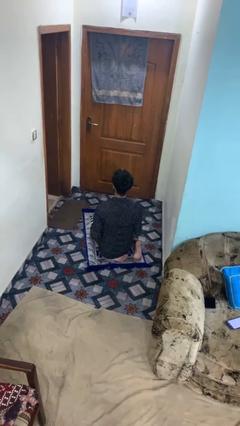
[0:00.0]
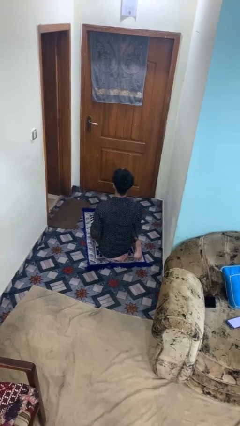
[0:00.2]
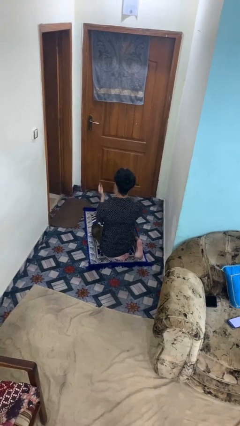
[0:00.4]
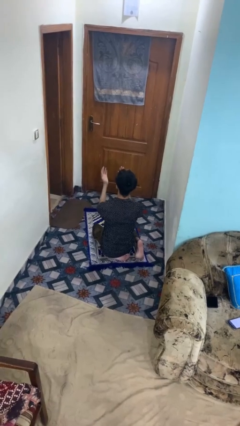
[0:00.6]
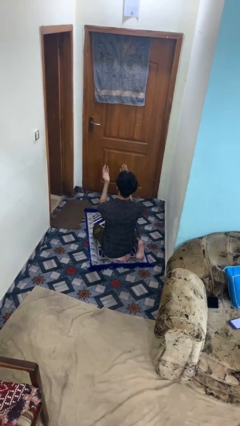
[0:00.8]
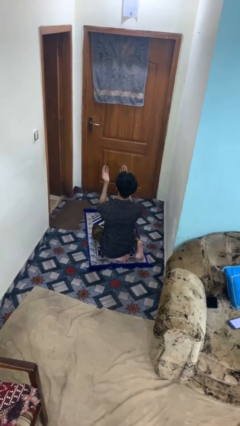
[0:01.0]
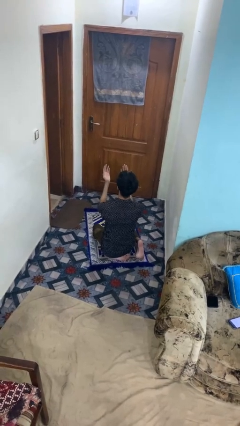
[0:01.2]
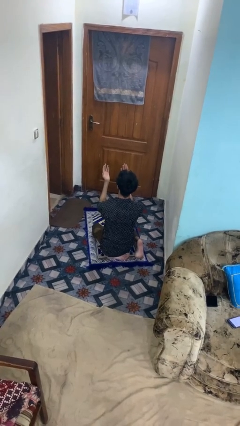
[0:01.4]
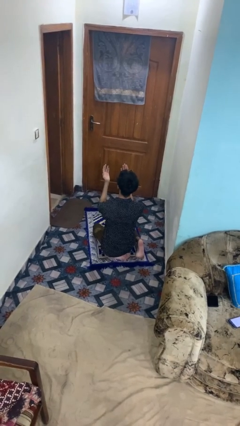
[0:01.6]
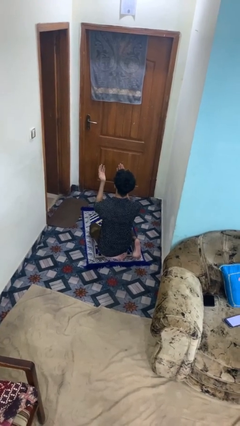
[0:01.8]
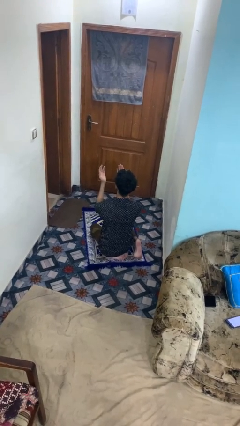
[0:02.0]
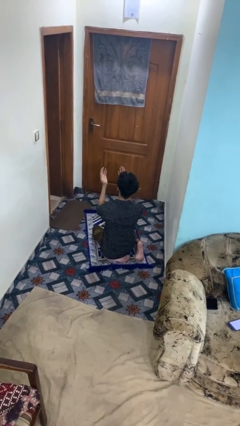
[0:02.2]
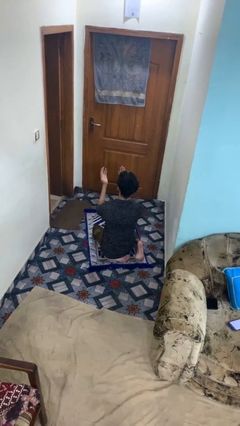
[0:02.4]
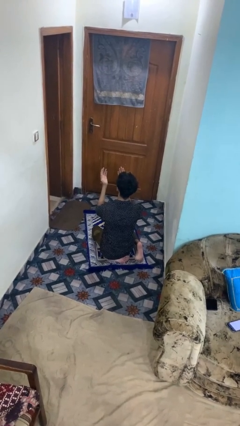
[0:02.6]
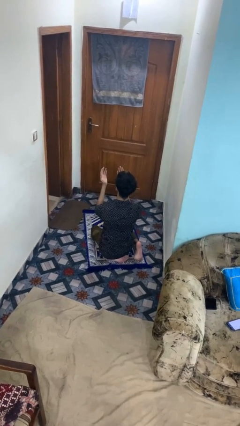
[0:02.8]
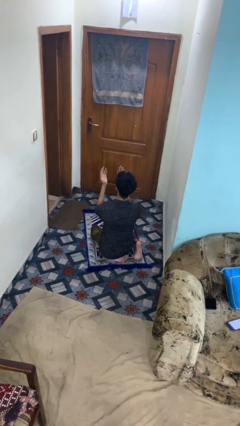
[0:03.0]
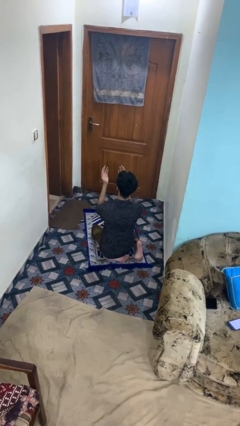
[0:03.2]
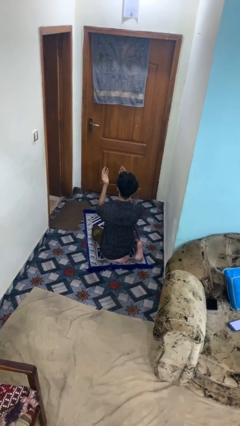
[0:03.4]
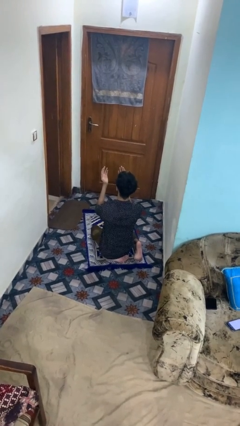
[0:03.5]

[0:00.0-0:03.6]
person prays

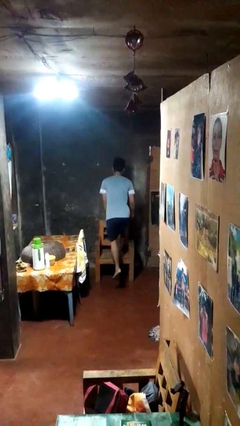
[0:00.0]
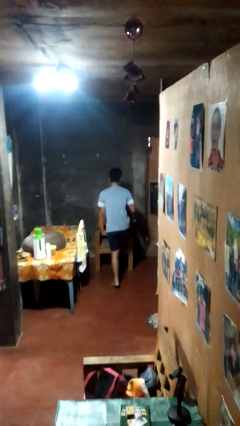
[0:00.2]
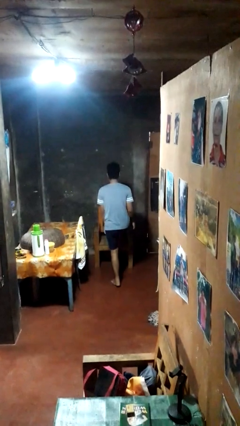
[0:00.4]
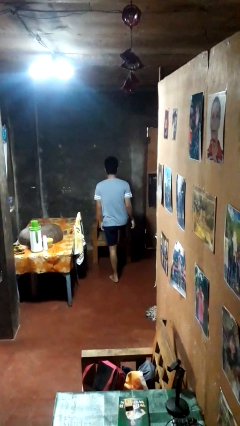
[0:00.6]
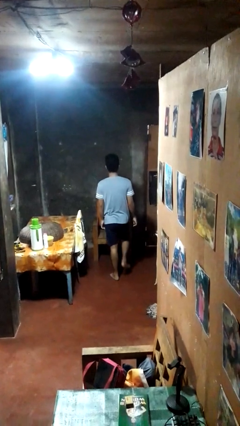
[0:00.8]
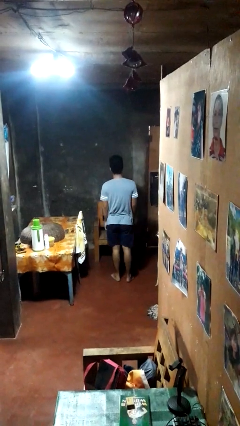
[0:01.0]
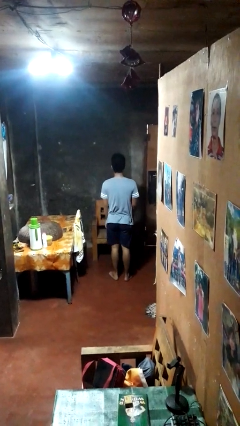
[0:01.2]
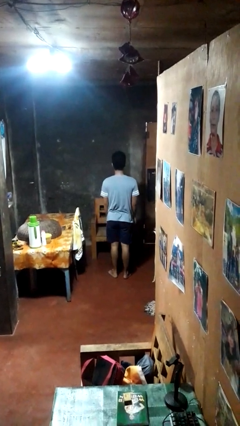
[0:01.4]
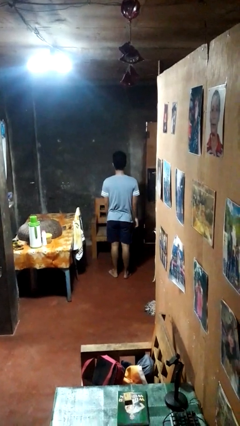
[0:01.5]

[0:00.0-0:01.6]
person climbs off chair

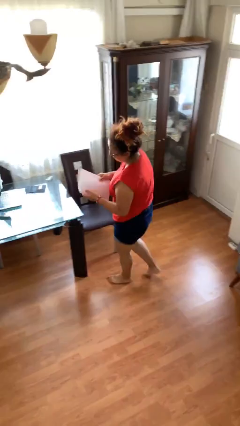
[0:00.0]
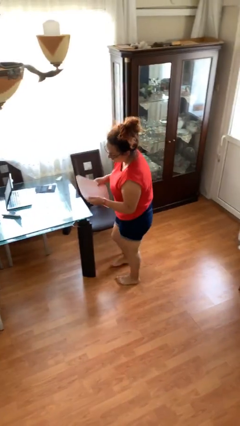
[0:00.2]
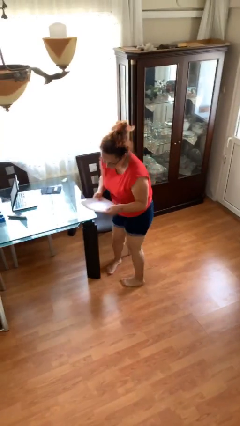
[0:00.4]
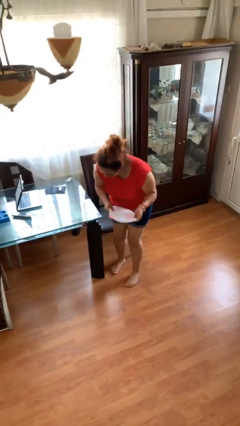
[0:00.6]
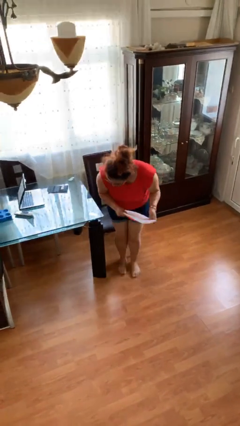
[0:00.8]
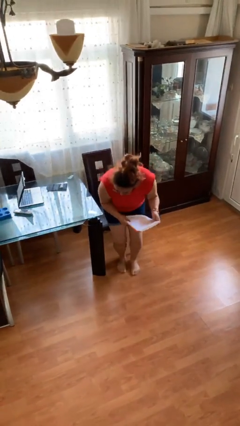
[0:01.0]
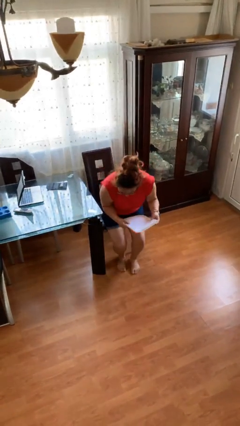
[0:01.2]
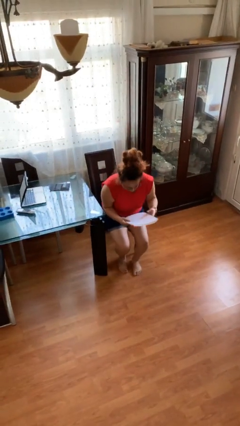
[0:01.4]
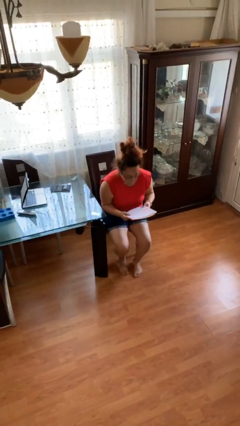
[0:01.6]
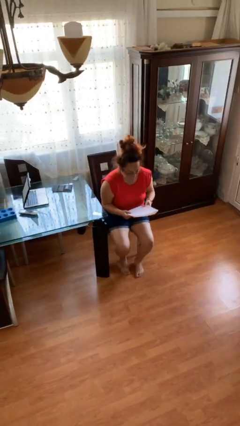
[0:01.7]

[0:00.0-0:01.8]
person sits down

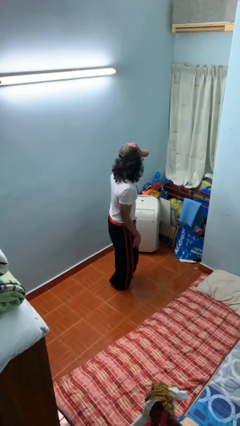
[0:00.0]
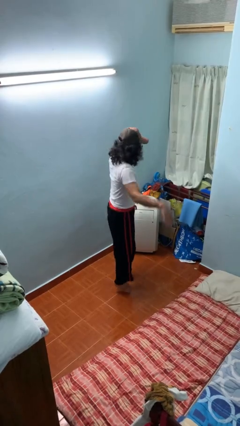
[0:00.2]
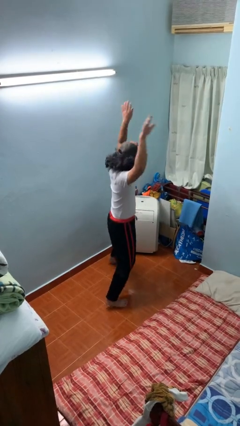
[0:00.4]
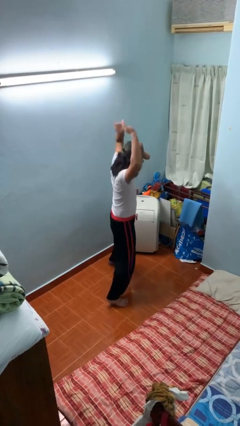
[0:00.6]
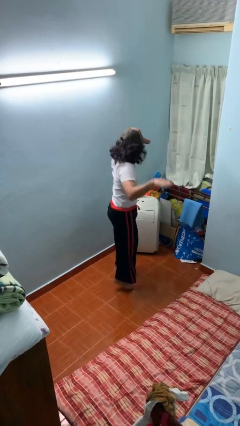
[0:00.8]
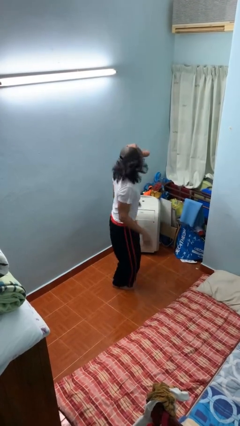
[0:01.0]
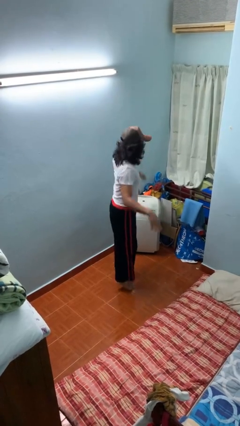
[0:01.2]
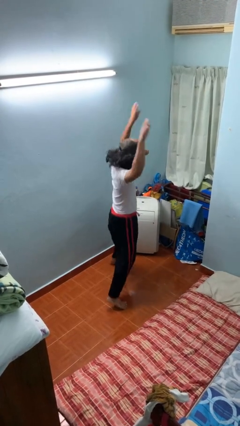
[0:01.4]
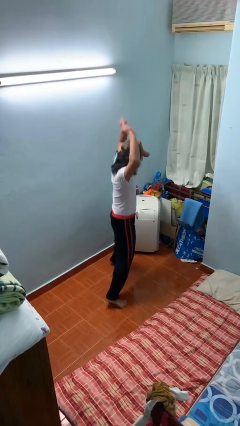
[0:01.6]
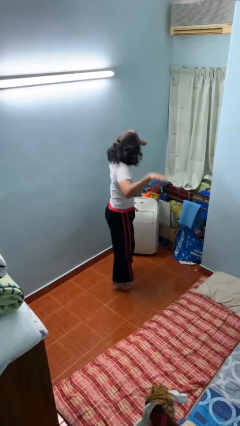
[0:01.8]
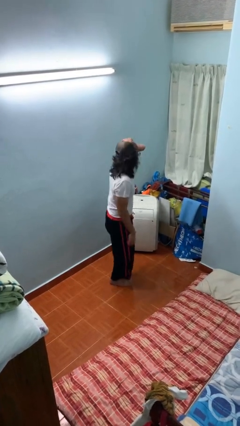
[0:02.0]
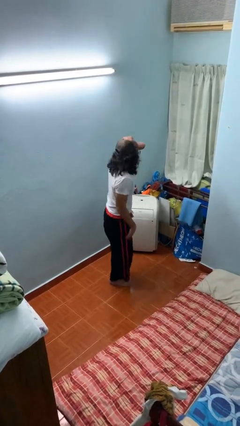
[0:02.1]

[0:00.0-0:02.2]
person exercises with jumping jacks

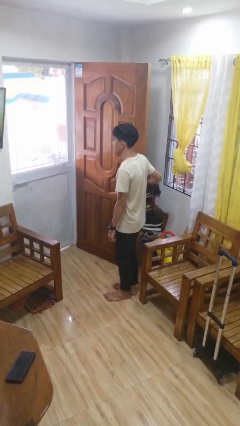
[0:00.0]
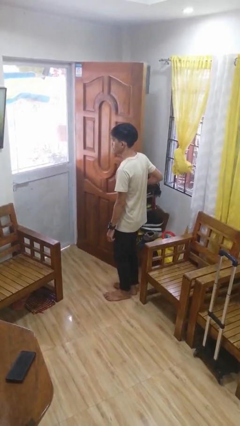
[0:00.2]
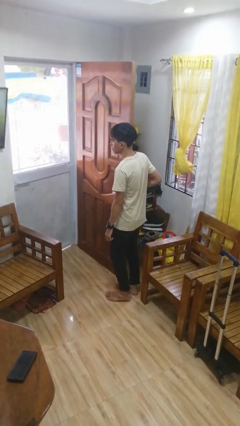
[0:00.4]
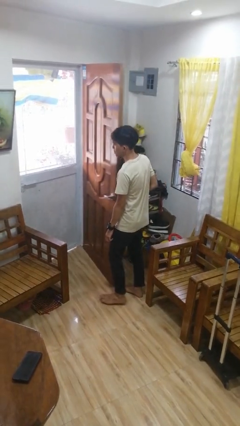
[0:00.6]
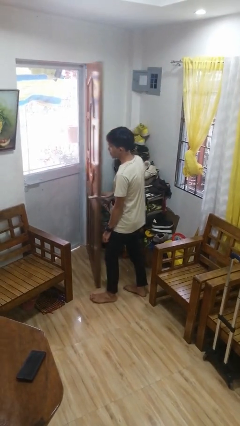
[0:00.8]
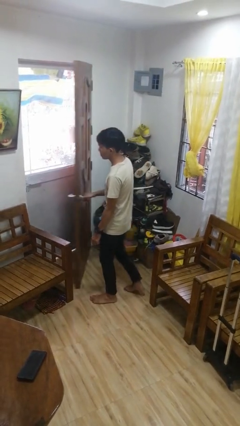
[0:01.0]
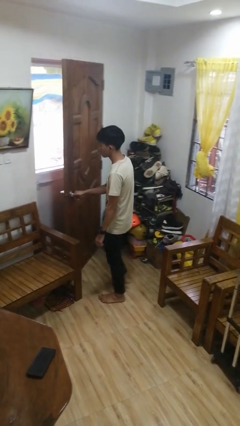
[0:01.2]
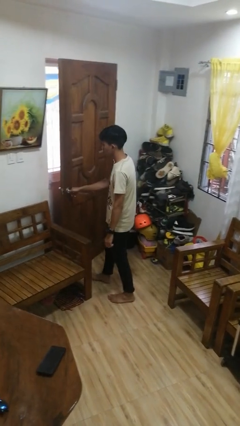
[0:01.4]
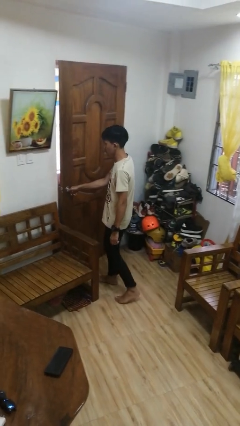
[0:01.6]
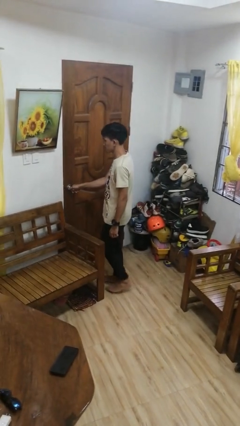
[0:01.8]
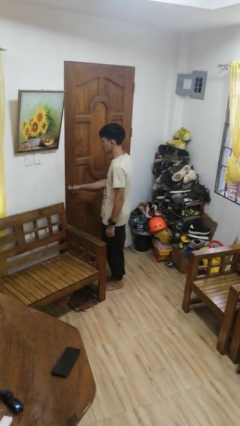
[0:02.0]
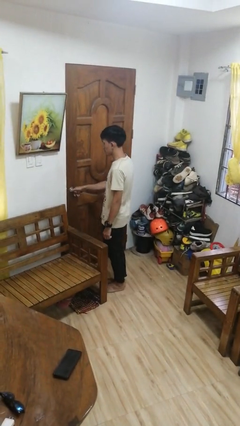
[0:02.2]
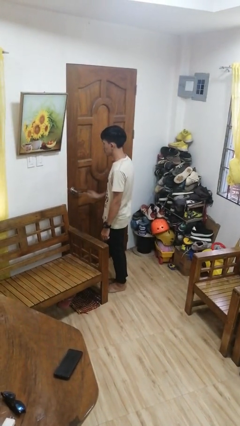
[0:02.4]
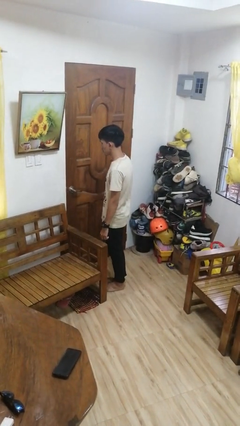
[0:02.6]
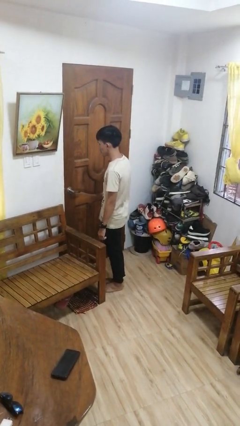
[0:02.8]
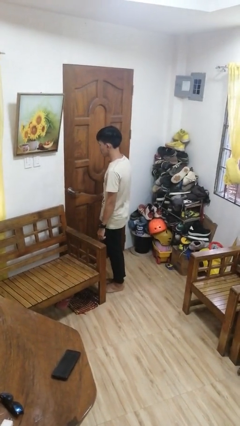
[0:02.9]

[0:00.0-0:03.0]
person closes facility door

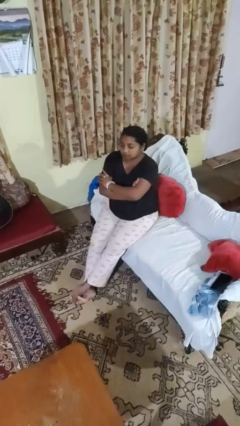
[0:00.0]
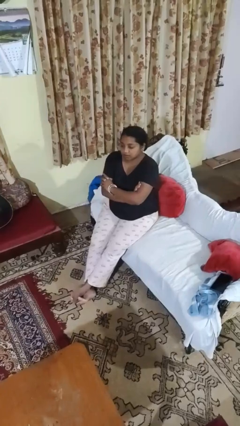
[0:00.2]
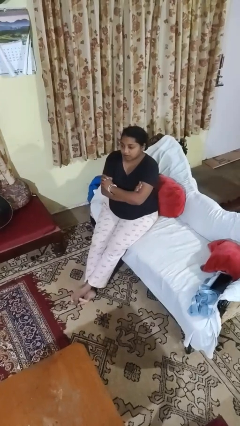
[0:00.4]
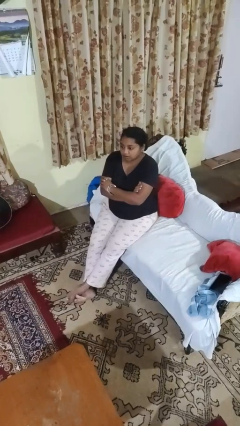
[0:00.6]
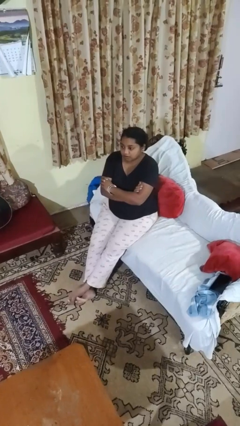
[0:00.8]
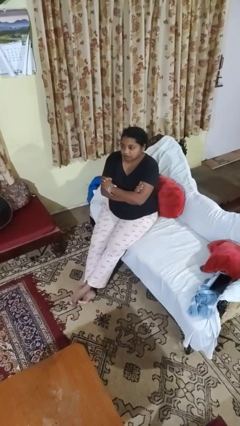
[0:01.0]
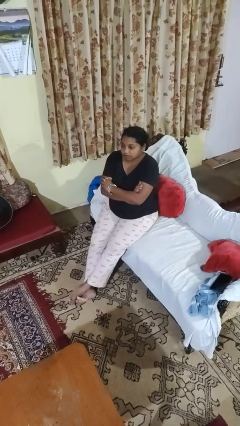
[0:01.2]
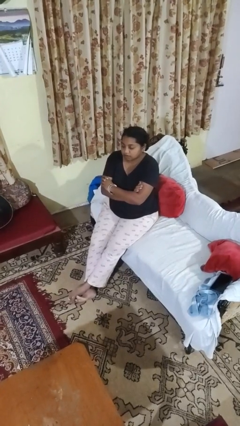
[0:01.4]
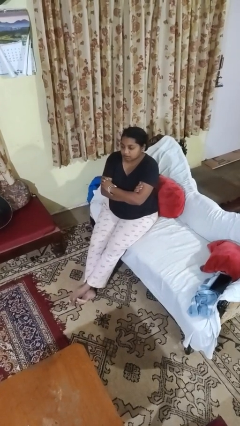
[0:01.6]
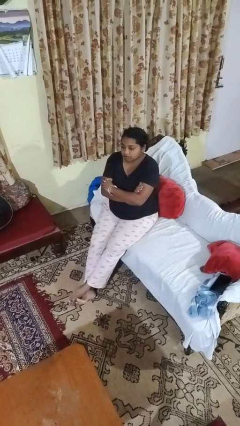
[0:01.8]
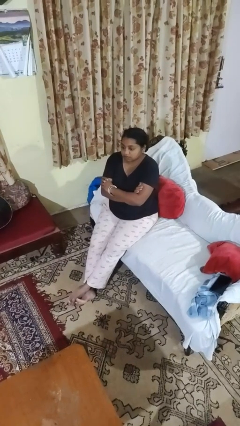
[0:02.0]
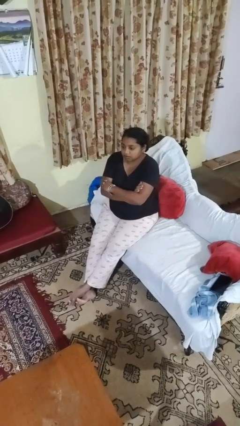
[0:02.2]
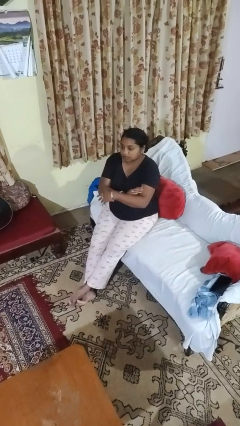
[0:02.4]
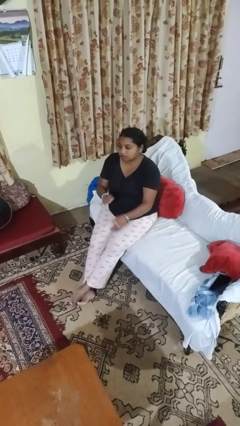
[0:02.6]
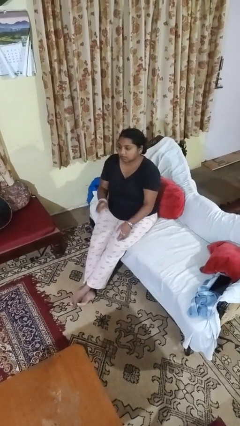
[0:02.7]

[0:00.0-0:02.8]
person crosses arms

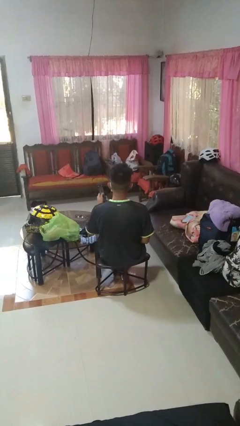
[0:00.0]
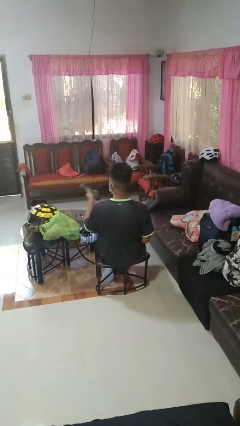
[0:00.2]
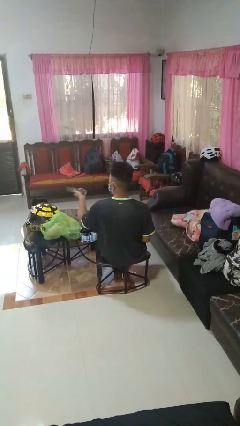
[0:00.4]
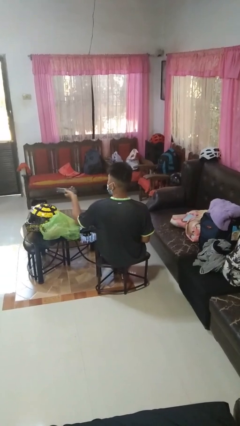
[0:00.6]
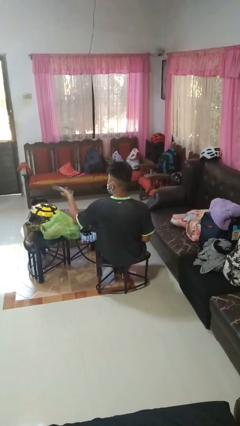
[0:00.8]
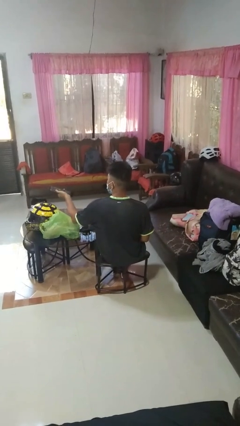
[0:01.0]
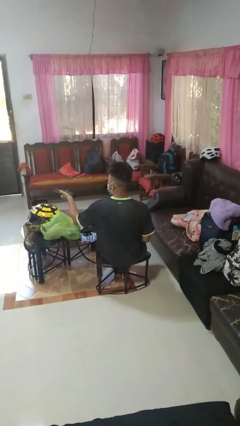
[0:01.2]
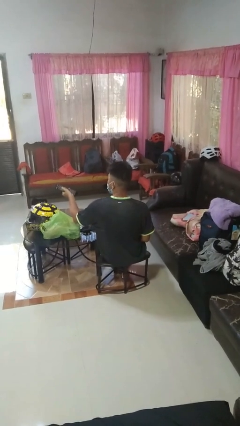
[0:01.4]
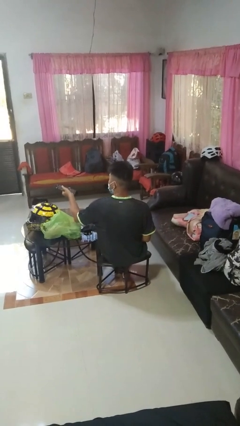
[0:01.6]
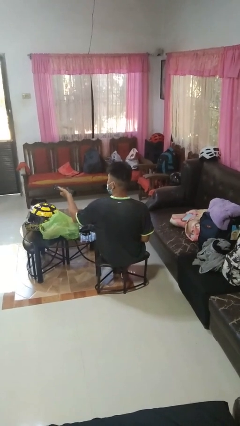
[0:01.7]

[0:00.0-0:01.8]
person uses television remote
